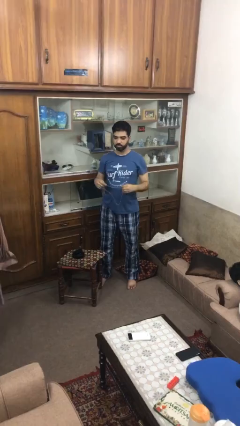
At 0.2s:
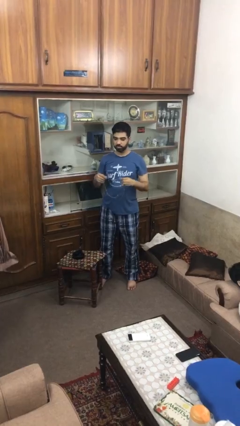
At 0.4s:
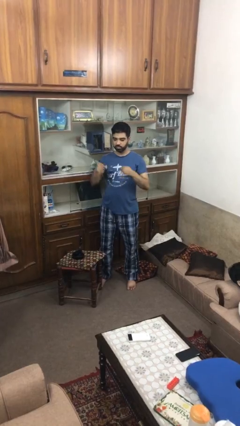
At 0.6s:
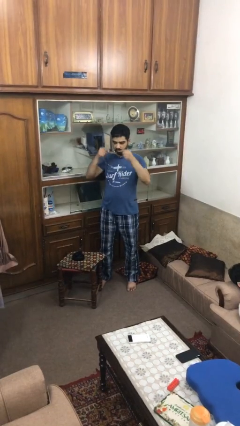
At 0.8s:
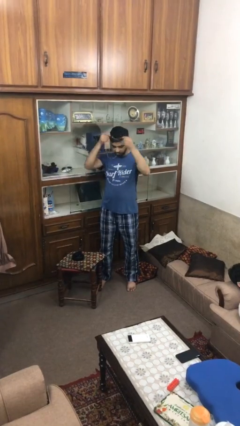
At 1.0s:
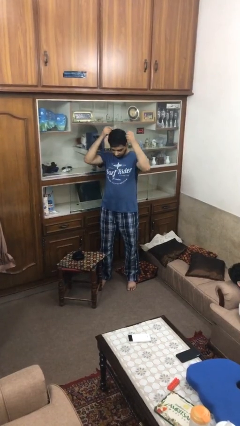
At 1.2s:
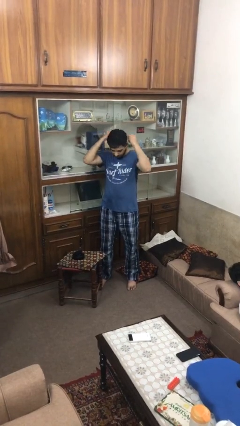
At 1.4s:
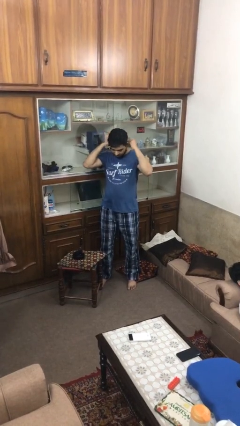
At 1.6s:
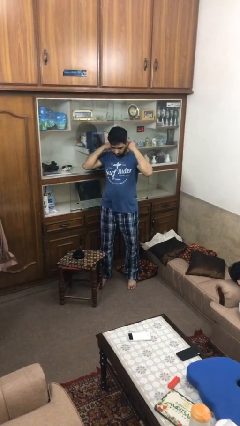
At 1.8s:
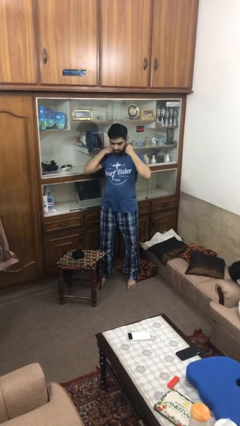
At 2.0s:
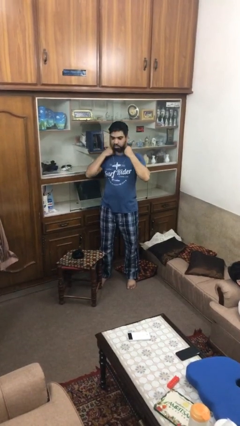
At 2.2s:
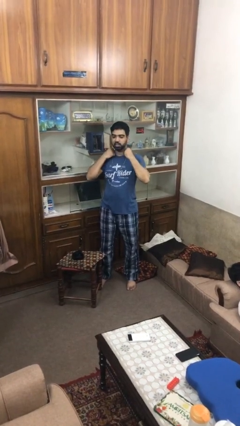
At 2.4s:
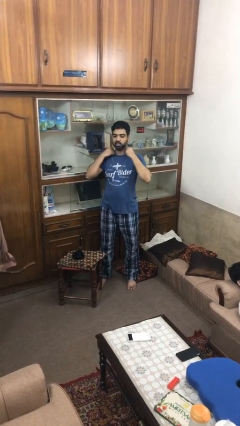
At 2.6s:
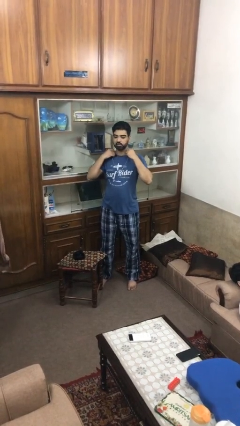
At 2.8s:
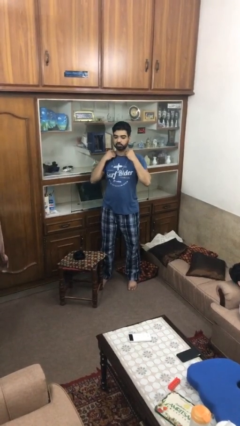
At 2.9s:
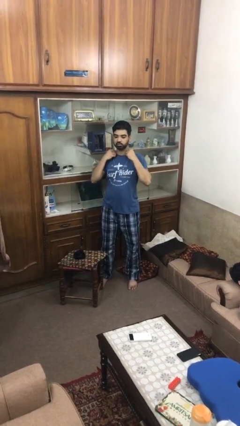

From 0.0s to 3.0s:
person puts on necklace

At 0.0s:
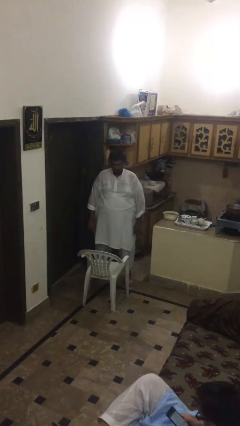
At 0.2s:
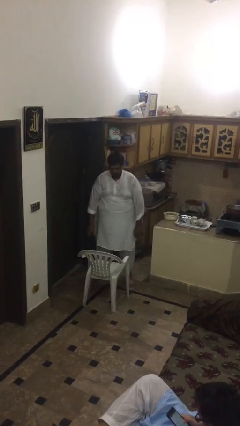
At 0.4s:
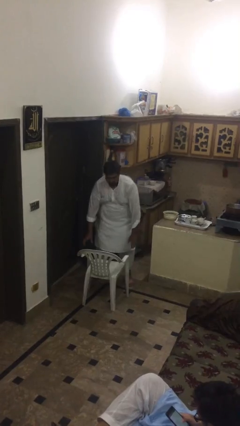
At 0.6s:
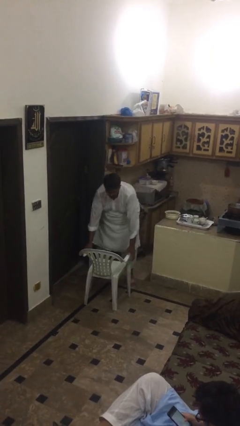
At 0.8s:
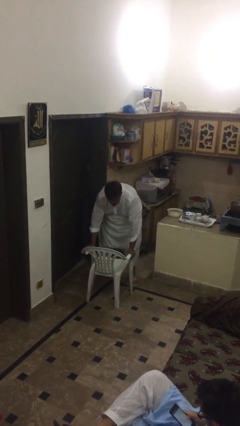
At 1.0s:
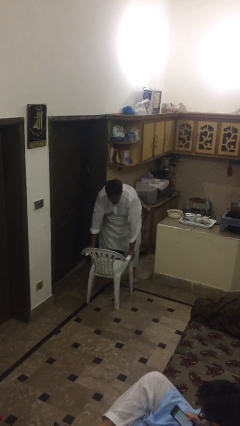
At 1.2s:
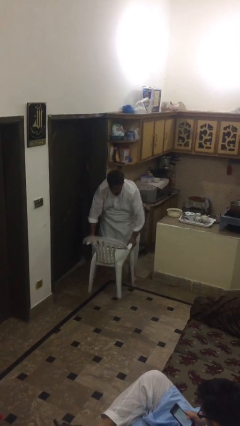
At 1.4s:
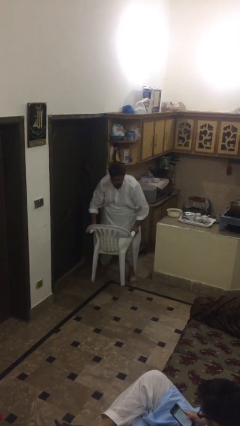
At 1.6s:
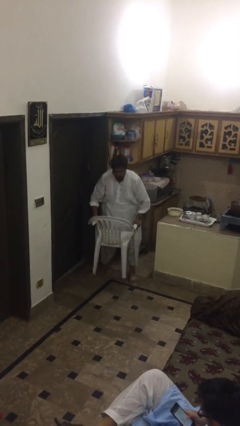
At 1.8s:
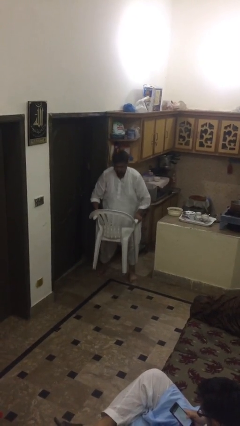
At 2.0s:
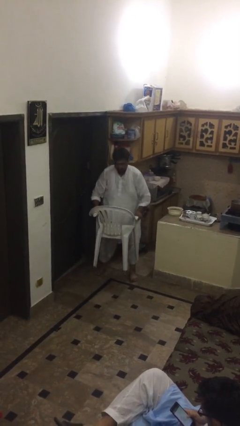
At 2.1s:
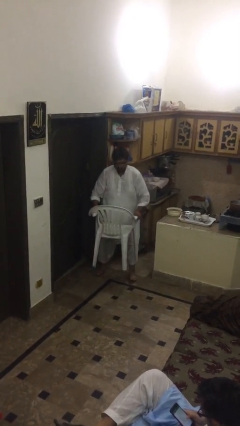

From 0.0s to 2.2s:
person picks up object from floor

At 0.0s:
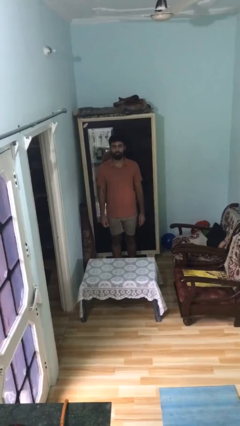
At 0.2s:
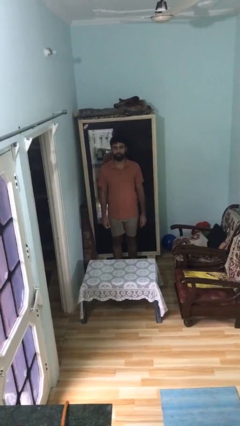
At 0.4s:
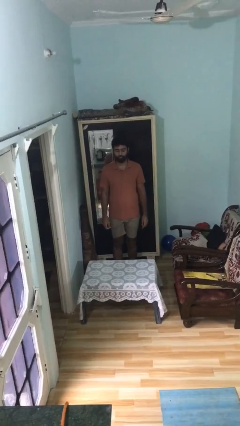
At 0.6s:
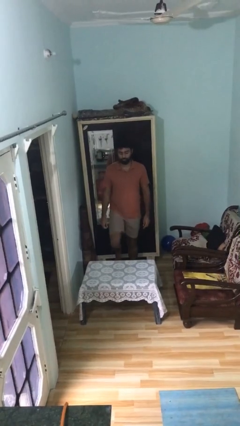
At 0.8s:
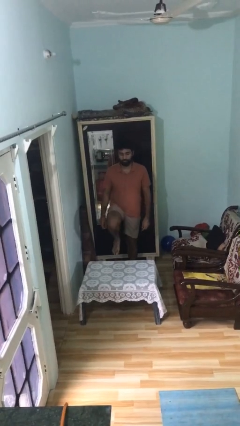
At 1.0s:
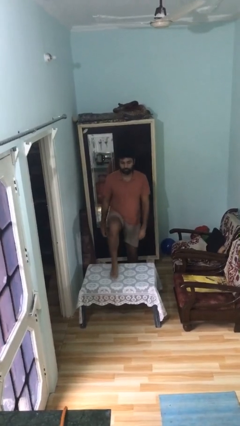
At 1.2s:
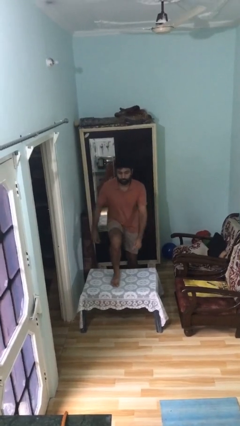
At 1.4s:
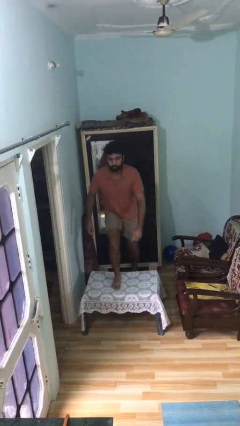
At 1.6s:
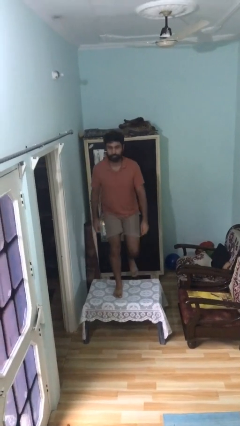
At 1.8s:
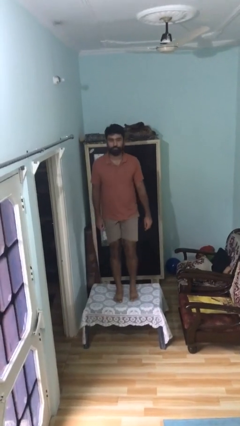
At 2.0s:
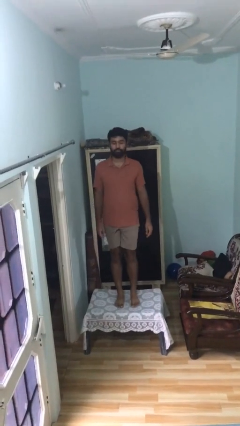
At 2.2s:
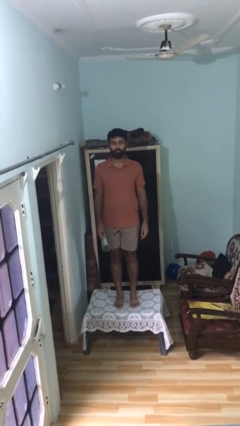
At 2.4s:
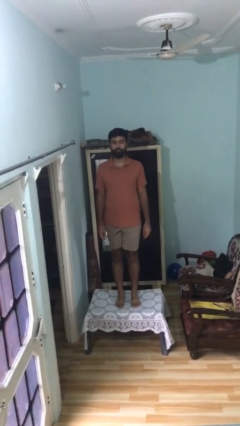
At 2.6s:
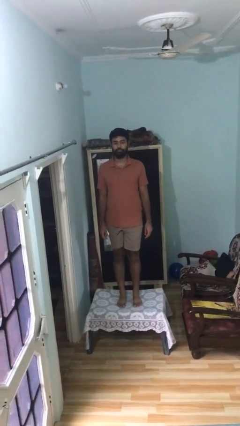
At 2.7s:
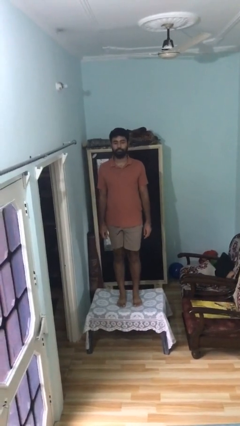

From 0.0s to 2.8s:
person climbs on table

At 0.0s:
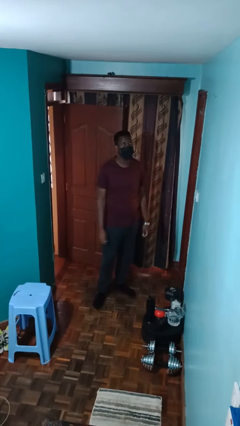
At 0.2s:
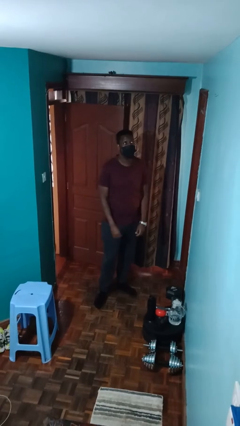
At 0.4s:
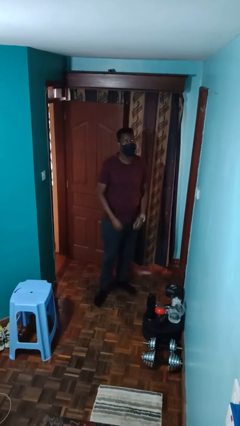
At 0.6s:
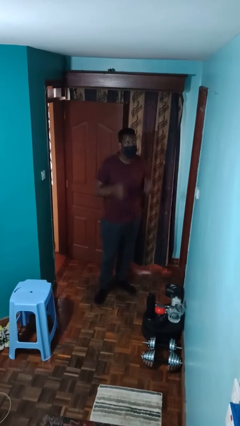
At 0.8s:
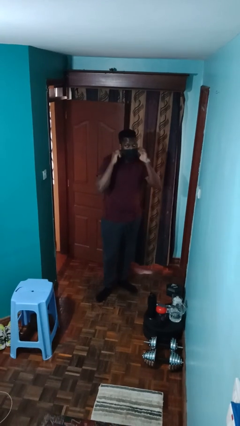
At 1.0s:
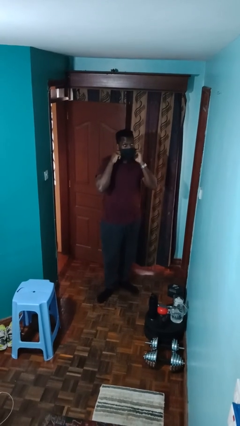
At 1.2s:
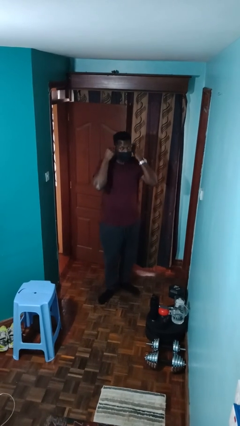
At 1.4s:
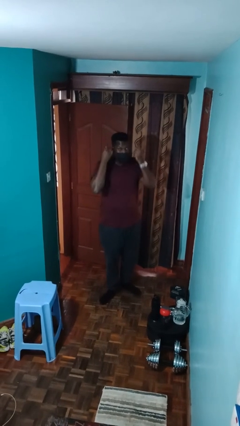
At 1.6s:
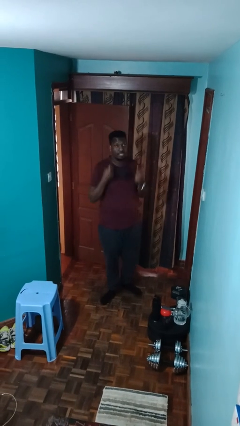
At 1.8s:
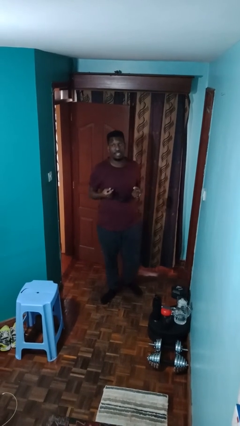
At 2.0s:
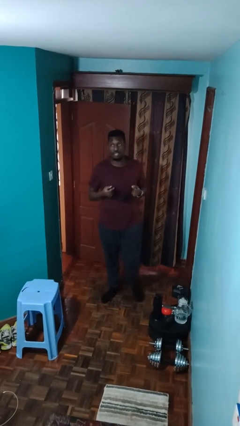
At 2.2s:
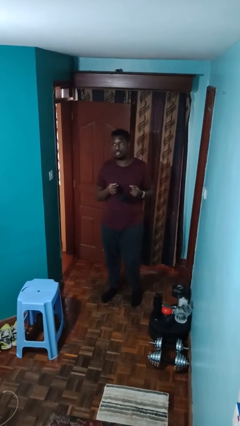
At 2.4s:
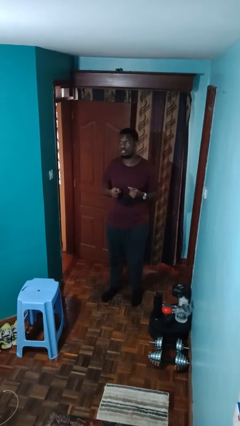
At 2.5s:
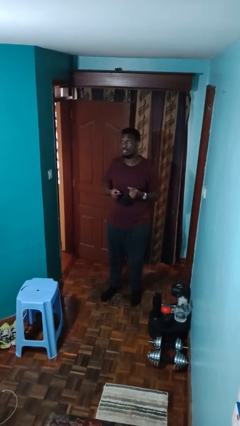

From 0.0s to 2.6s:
person takes off facemask

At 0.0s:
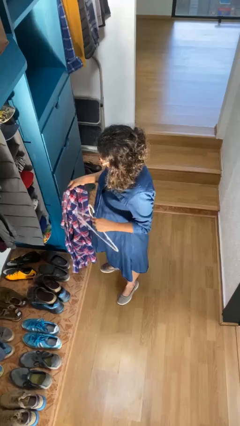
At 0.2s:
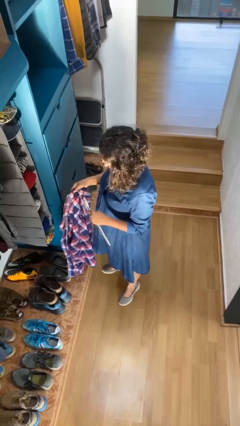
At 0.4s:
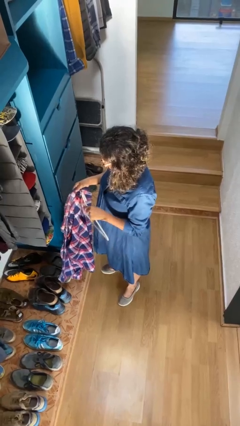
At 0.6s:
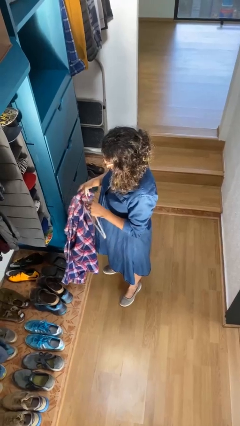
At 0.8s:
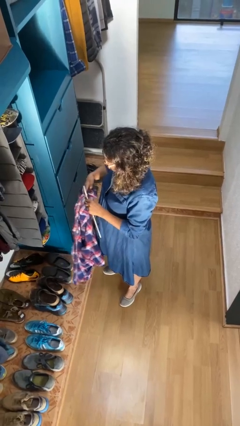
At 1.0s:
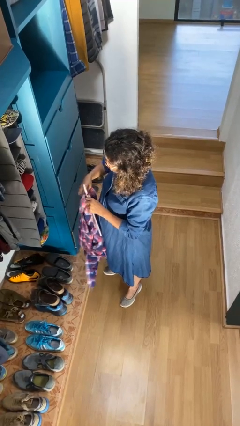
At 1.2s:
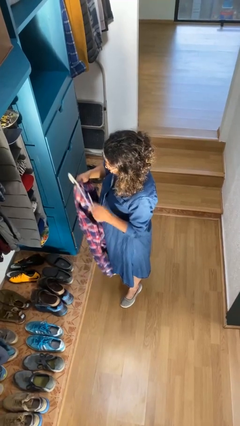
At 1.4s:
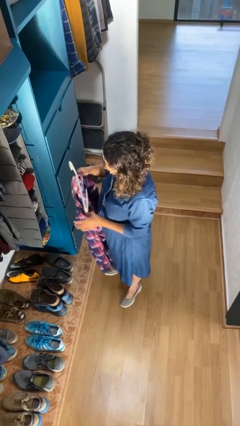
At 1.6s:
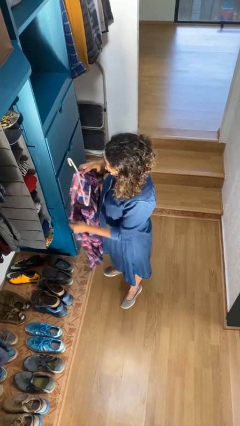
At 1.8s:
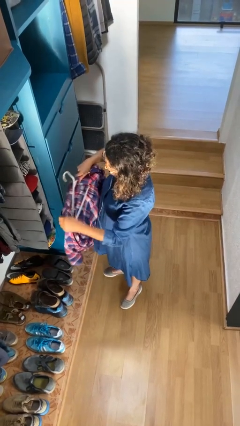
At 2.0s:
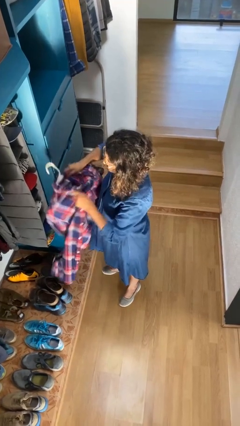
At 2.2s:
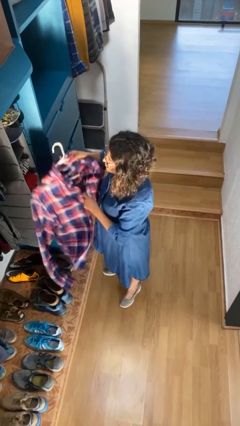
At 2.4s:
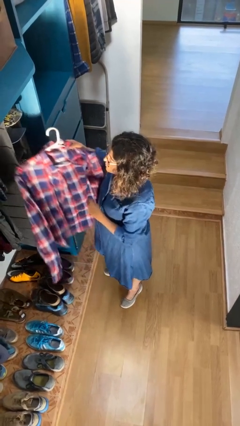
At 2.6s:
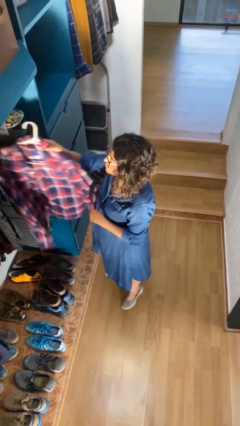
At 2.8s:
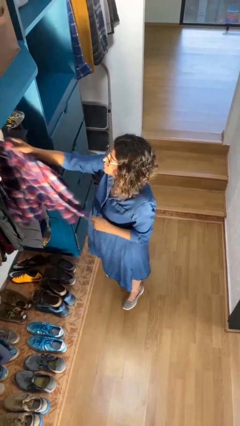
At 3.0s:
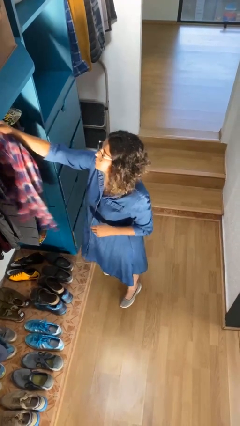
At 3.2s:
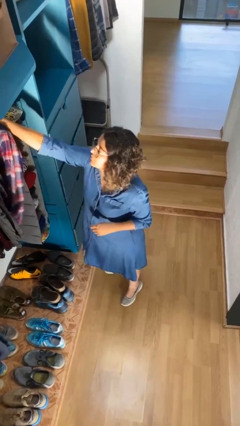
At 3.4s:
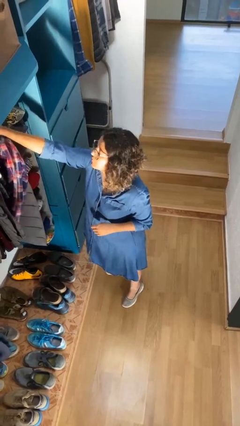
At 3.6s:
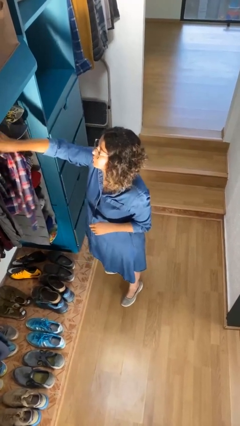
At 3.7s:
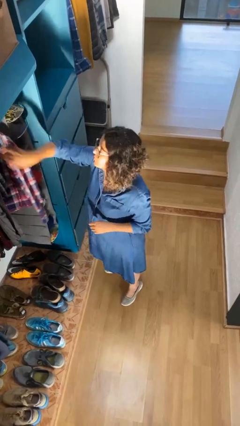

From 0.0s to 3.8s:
person puts clothes into closet

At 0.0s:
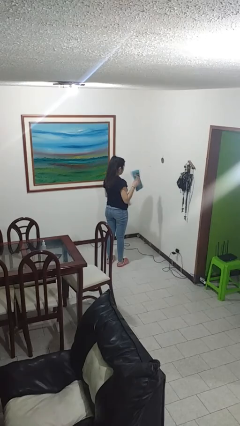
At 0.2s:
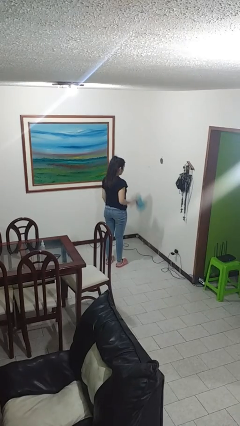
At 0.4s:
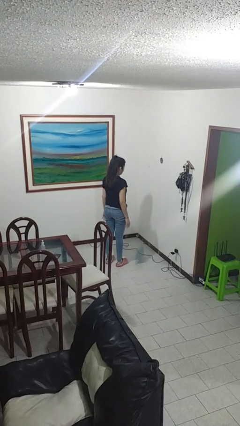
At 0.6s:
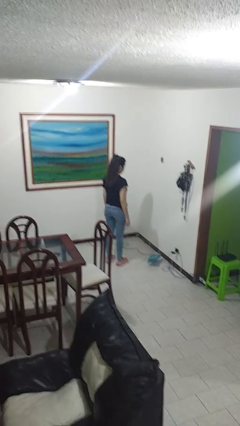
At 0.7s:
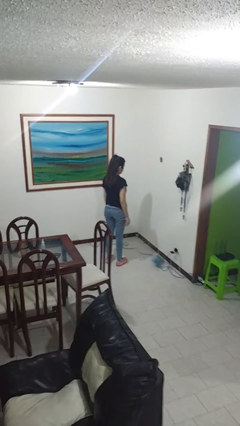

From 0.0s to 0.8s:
person throws object into air

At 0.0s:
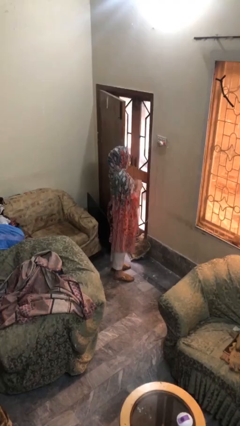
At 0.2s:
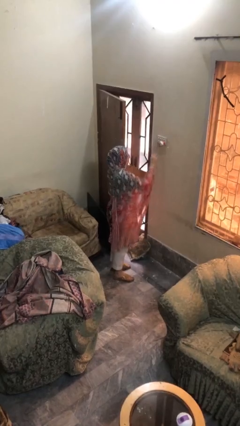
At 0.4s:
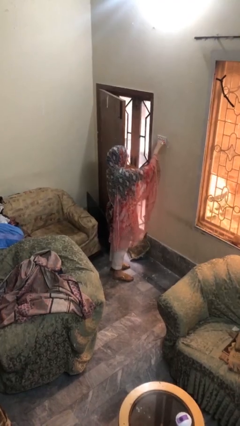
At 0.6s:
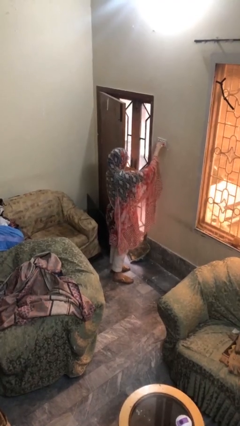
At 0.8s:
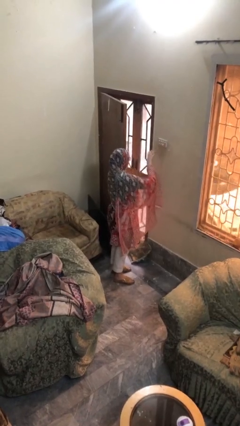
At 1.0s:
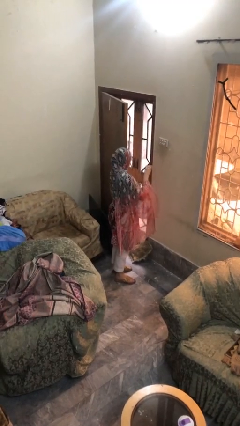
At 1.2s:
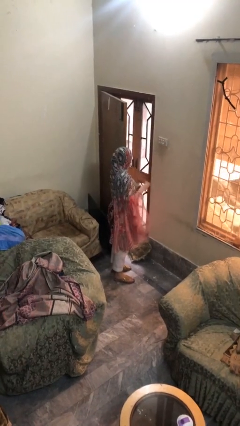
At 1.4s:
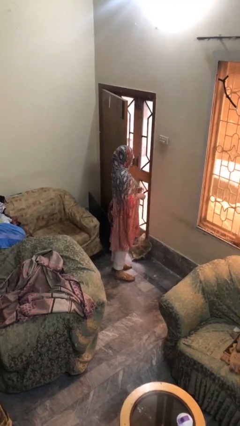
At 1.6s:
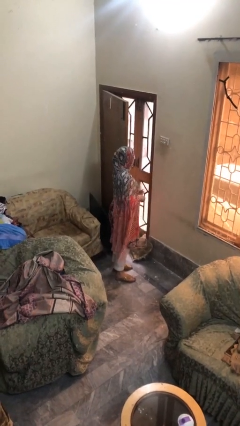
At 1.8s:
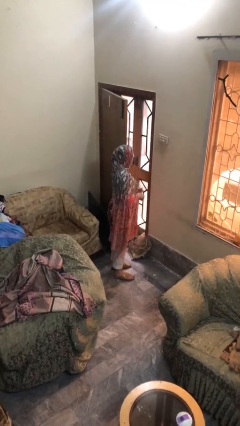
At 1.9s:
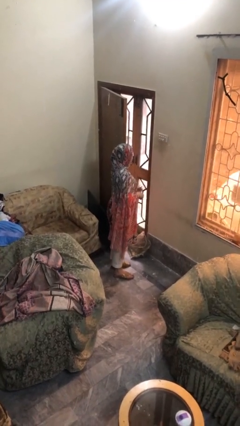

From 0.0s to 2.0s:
person unplugs from electrical socket

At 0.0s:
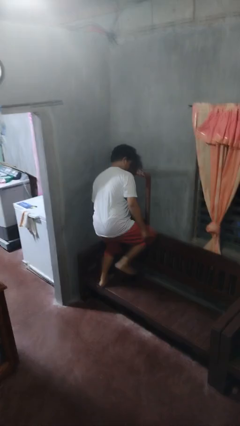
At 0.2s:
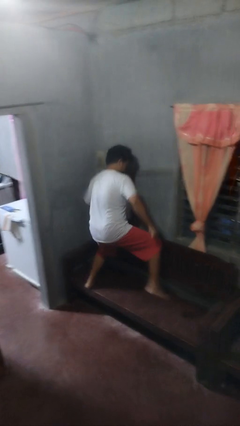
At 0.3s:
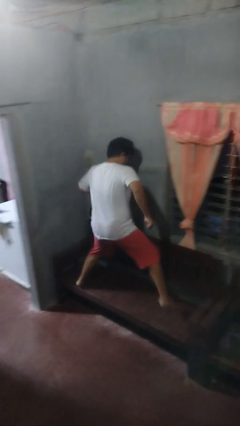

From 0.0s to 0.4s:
person jumps on couch
